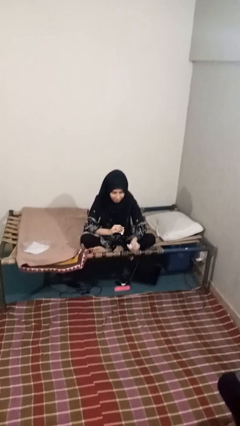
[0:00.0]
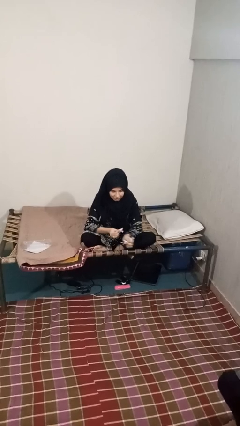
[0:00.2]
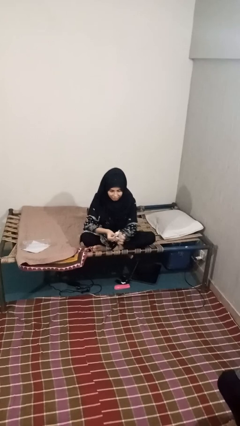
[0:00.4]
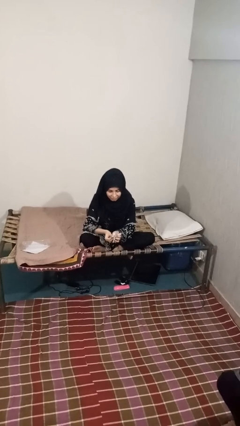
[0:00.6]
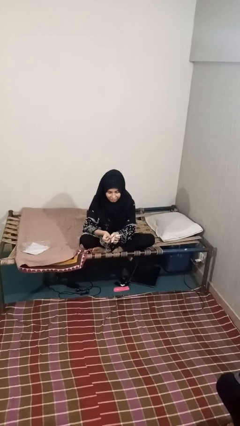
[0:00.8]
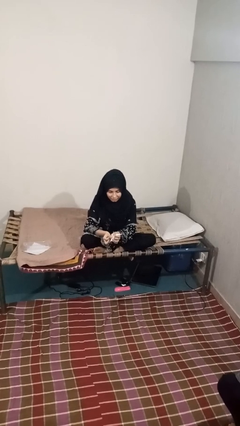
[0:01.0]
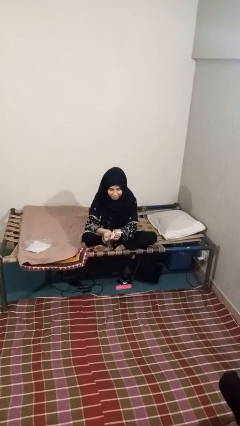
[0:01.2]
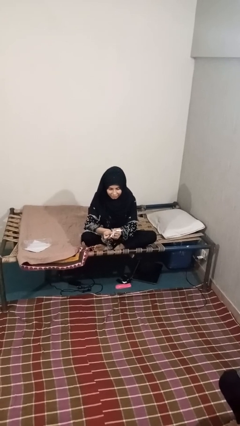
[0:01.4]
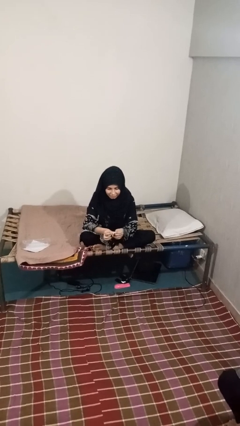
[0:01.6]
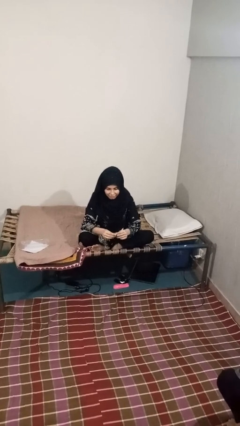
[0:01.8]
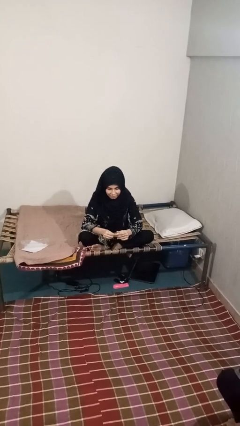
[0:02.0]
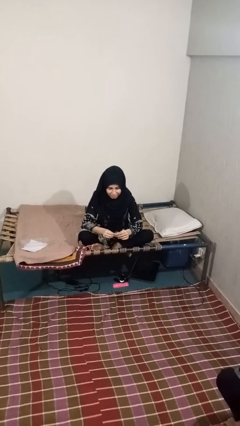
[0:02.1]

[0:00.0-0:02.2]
person tears paper

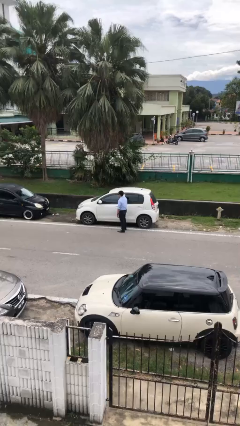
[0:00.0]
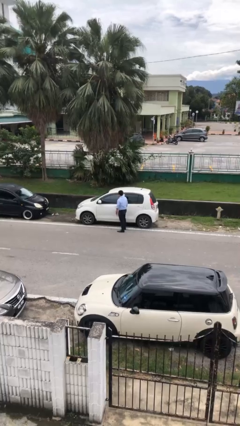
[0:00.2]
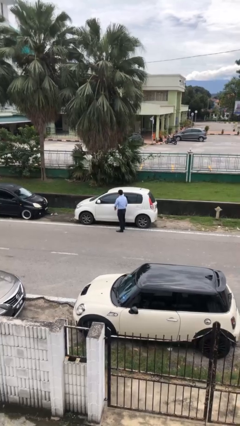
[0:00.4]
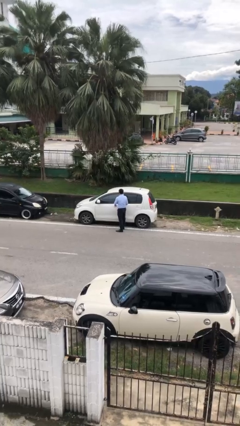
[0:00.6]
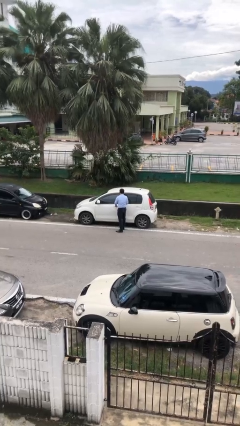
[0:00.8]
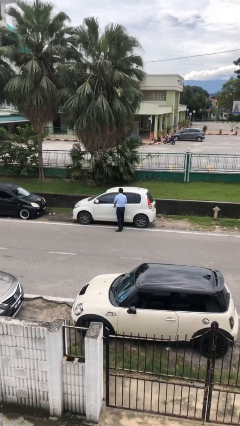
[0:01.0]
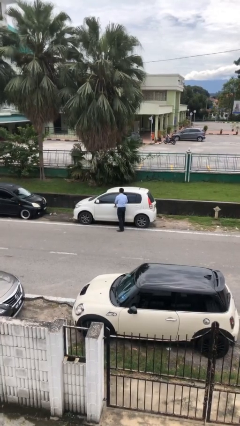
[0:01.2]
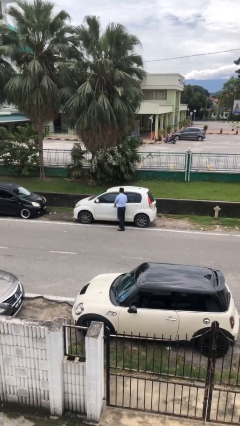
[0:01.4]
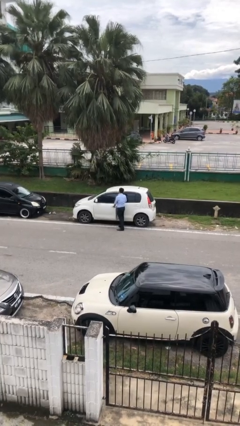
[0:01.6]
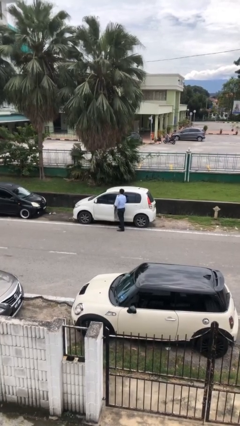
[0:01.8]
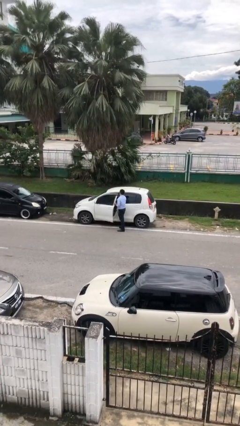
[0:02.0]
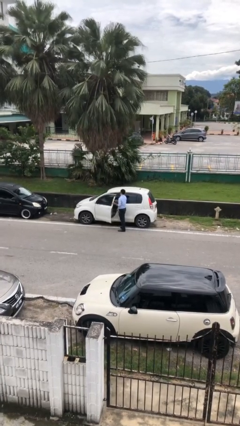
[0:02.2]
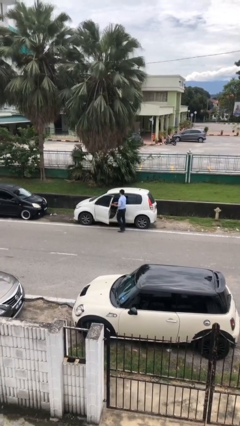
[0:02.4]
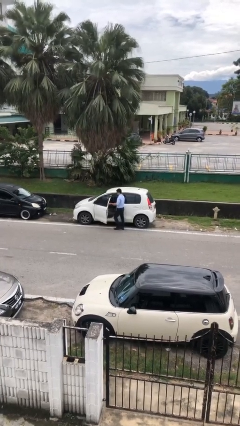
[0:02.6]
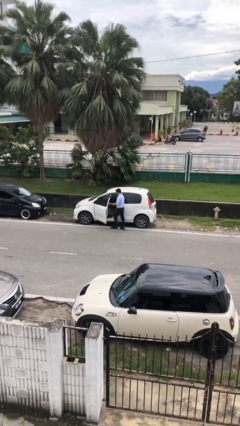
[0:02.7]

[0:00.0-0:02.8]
person opens car door

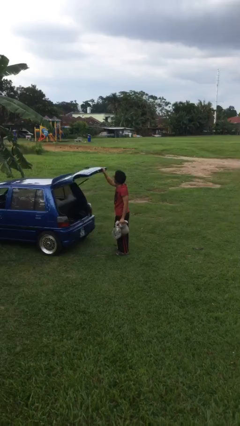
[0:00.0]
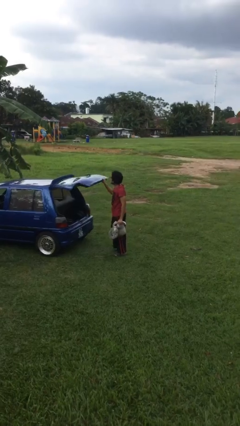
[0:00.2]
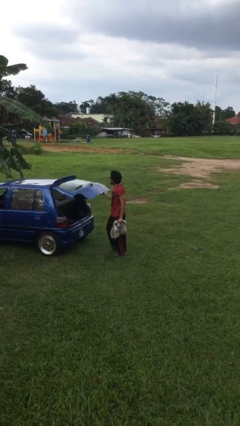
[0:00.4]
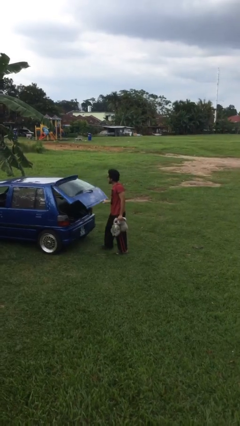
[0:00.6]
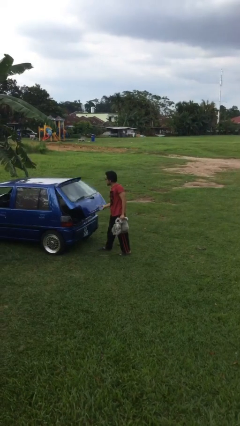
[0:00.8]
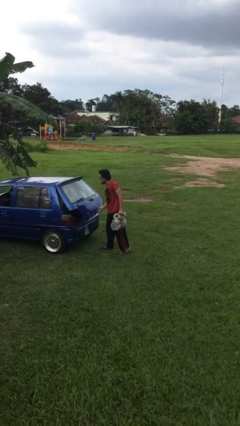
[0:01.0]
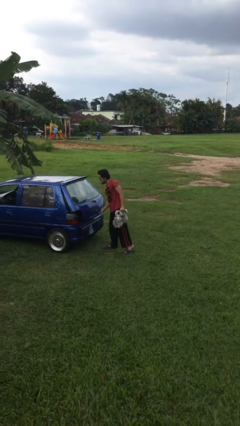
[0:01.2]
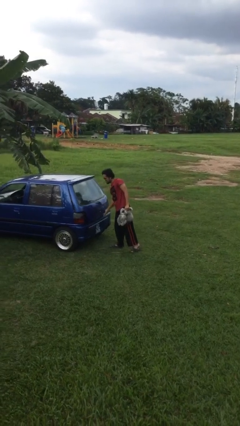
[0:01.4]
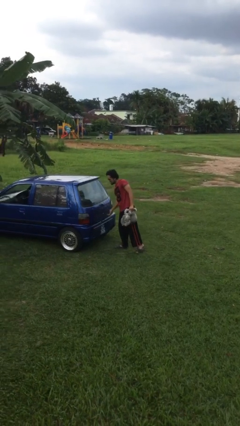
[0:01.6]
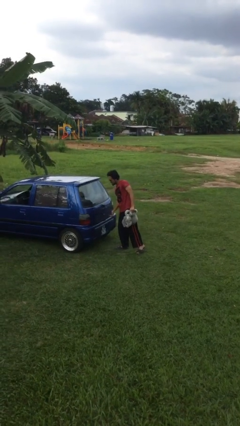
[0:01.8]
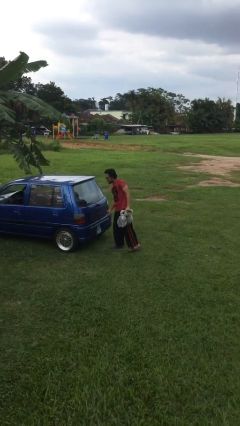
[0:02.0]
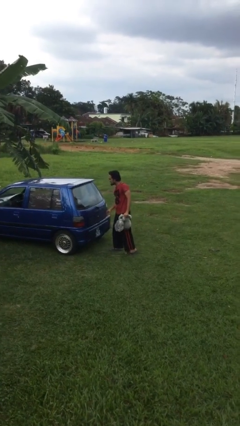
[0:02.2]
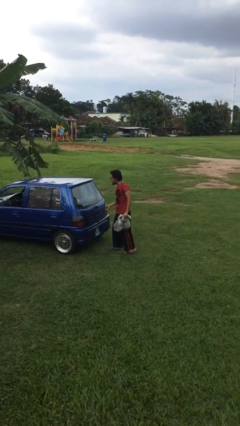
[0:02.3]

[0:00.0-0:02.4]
person closes car trunk

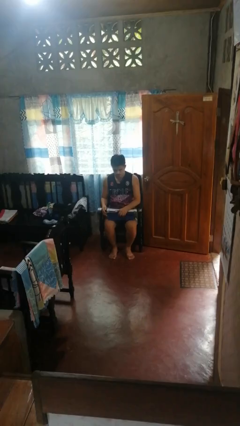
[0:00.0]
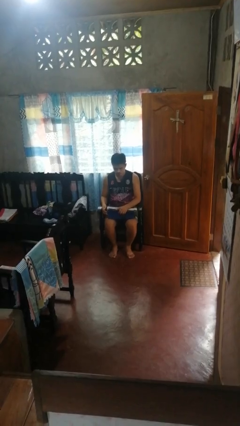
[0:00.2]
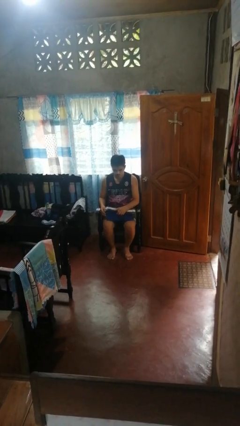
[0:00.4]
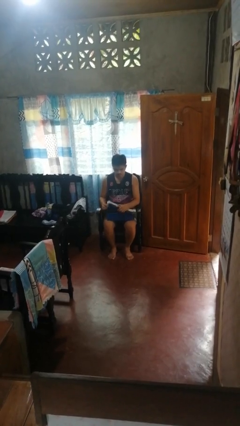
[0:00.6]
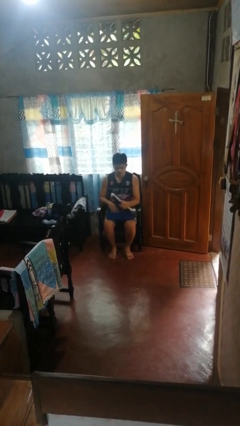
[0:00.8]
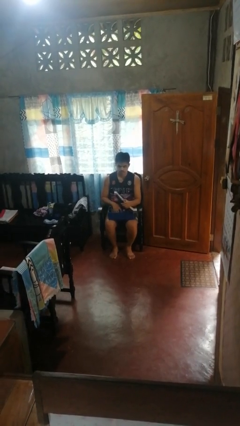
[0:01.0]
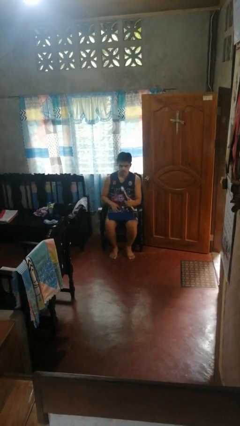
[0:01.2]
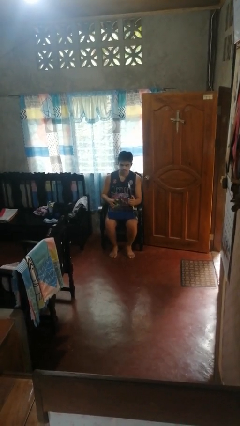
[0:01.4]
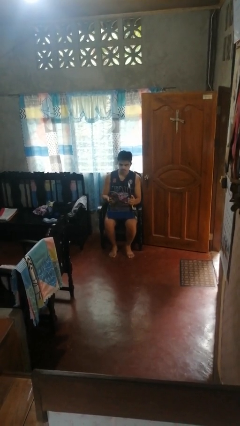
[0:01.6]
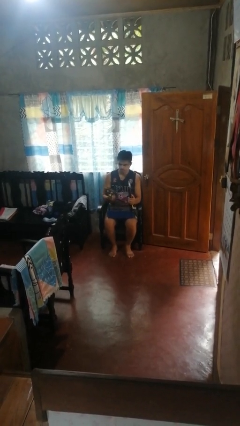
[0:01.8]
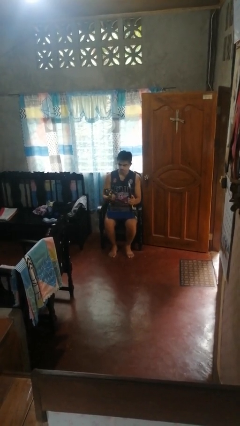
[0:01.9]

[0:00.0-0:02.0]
person takes object from box

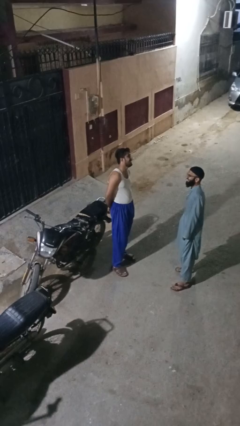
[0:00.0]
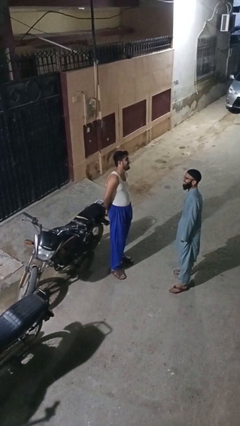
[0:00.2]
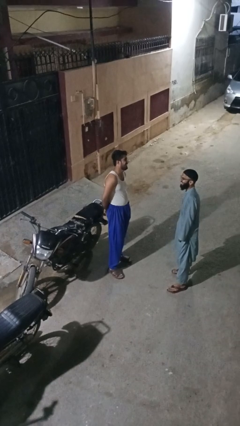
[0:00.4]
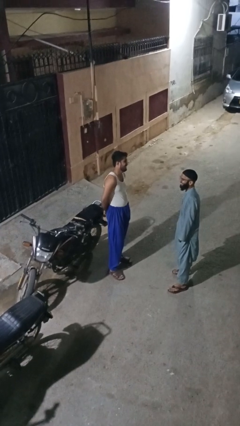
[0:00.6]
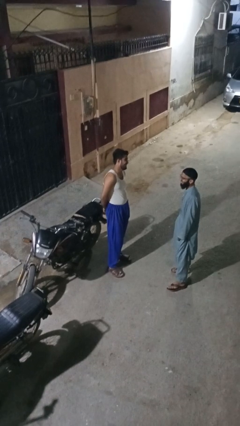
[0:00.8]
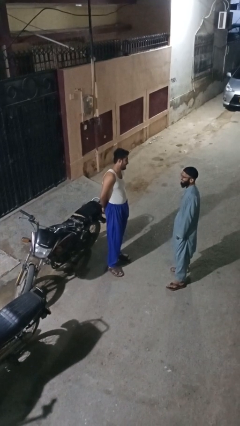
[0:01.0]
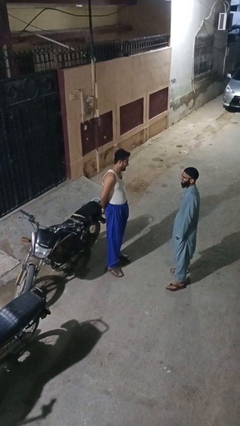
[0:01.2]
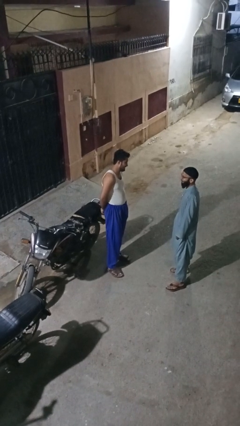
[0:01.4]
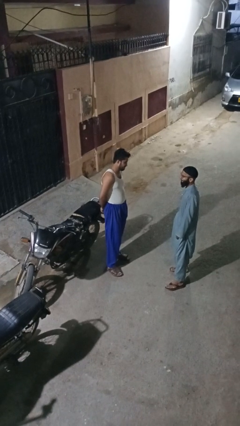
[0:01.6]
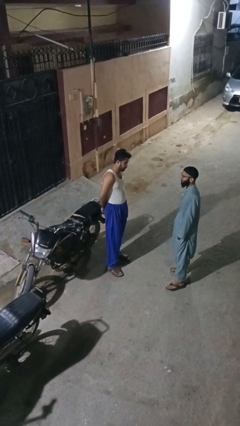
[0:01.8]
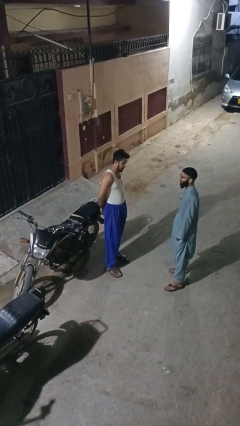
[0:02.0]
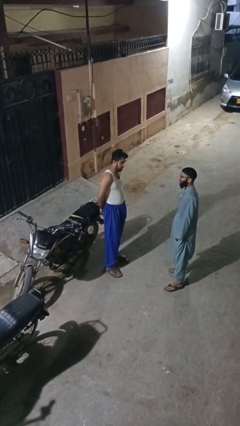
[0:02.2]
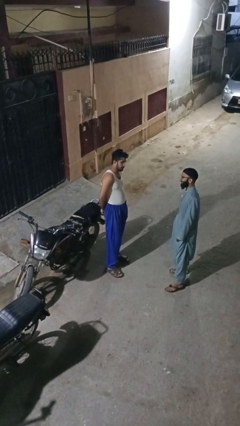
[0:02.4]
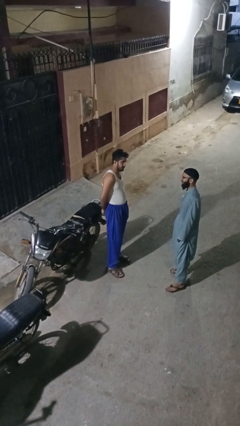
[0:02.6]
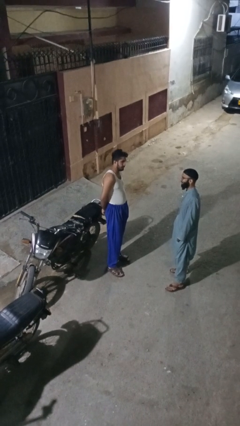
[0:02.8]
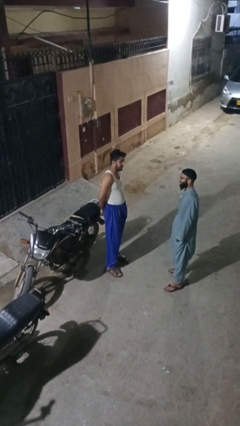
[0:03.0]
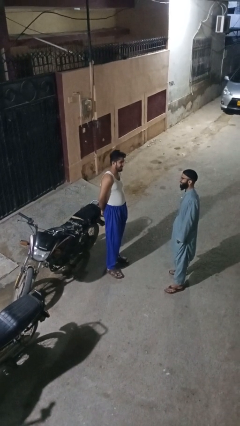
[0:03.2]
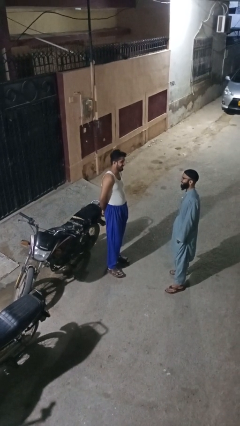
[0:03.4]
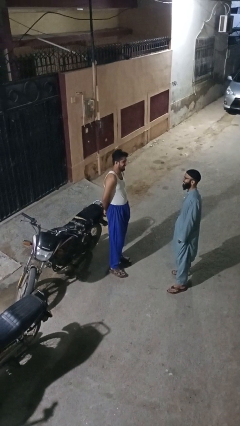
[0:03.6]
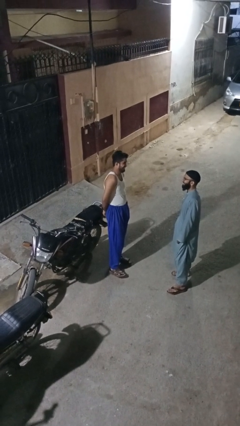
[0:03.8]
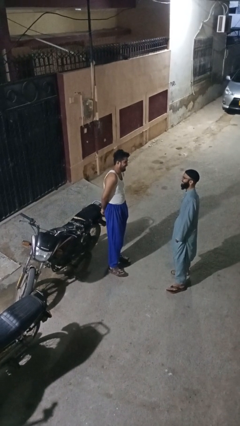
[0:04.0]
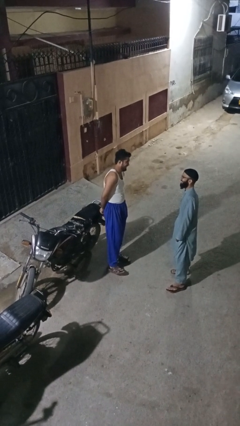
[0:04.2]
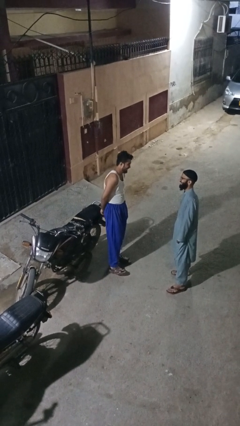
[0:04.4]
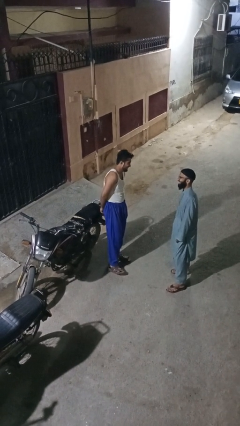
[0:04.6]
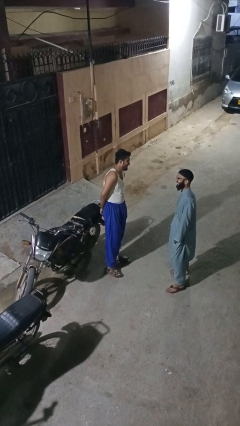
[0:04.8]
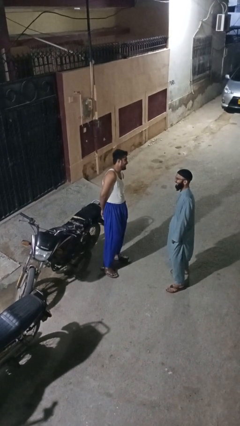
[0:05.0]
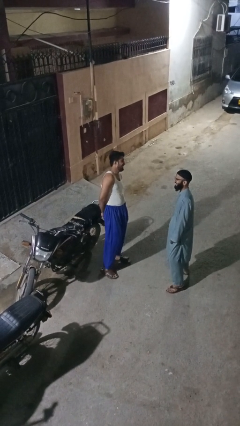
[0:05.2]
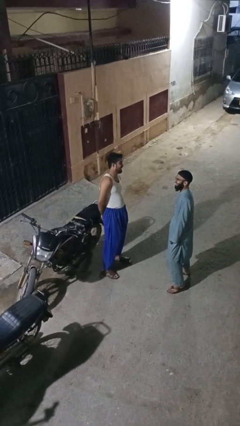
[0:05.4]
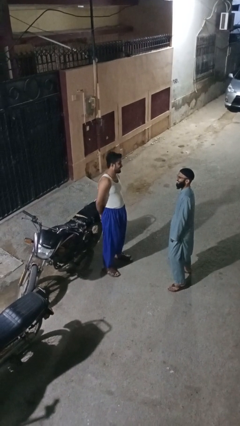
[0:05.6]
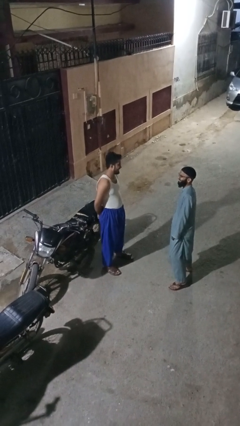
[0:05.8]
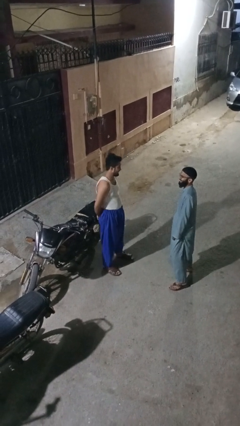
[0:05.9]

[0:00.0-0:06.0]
person laughs with person

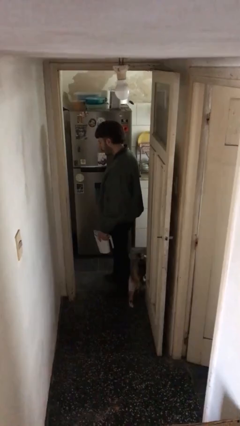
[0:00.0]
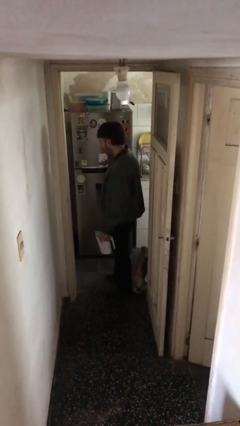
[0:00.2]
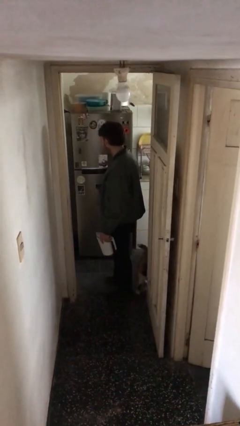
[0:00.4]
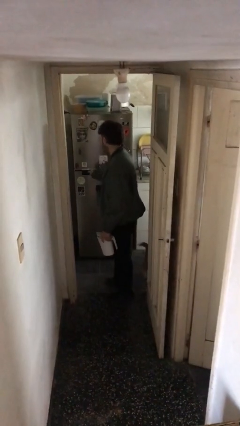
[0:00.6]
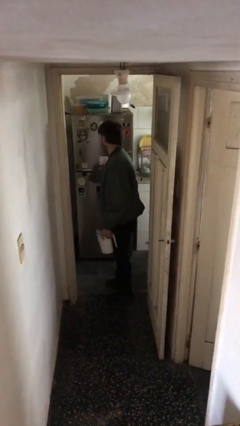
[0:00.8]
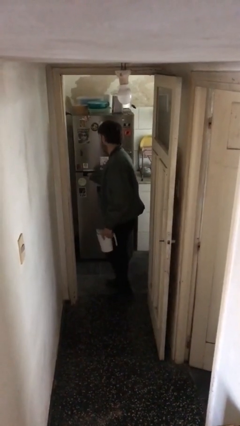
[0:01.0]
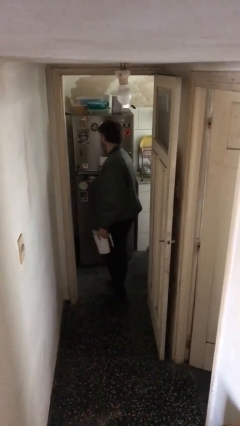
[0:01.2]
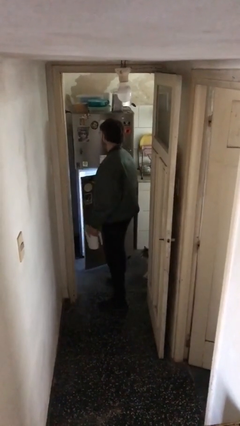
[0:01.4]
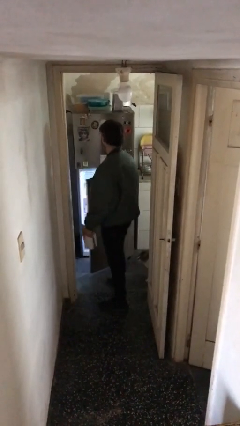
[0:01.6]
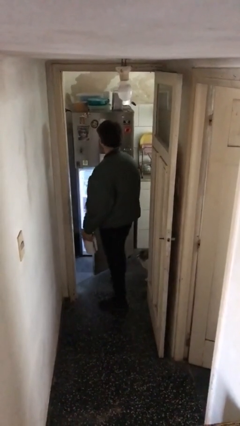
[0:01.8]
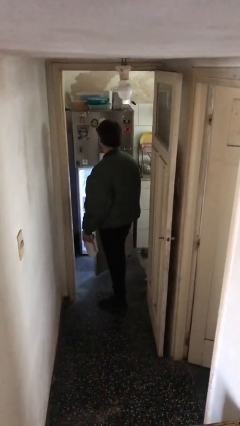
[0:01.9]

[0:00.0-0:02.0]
person opens refrigerator
